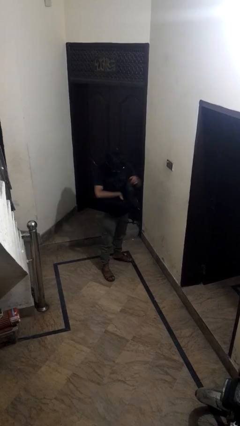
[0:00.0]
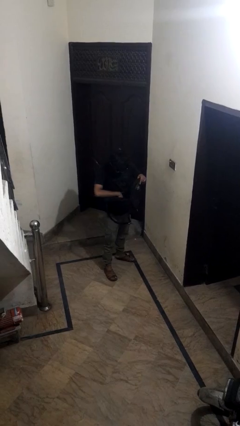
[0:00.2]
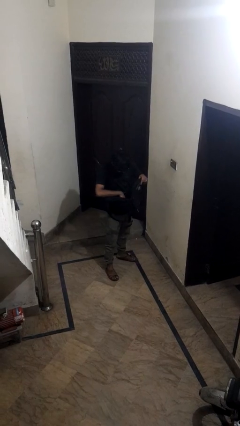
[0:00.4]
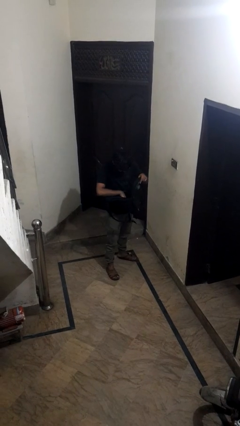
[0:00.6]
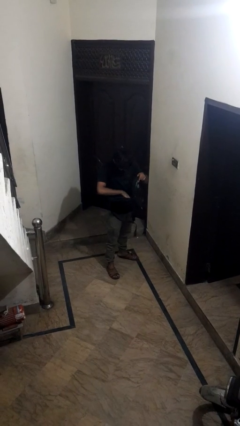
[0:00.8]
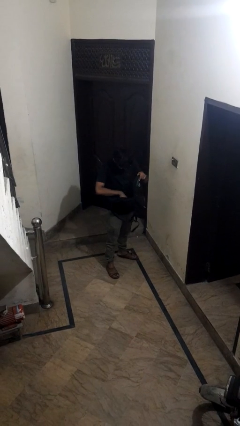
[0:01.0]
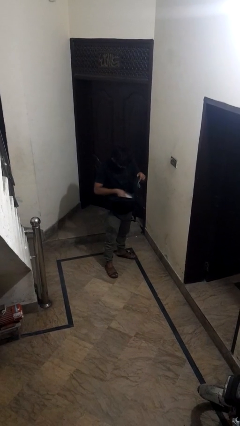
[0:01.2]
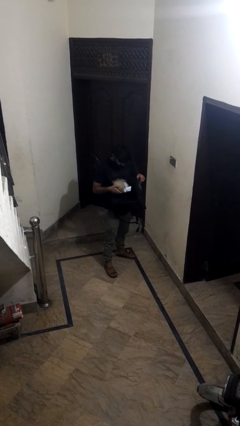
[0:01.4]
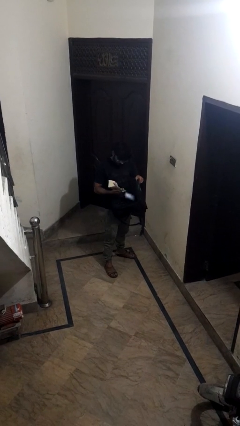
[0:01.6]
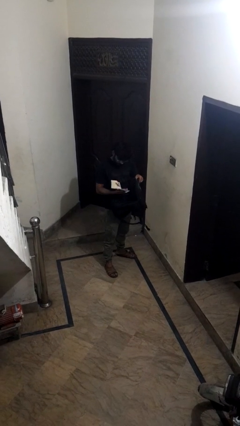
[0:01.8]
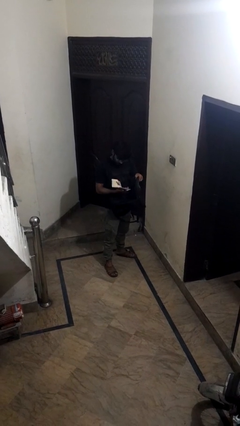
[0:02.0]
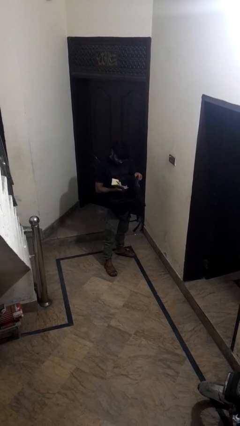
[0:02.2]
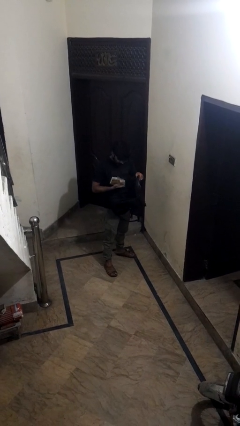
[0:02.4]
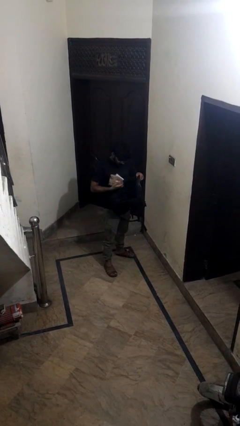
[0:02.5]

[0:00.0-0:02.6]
person takes object from backpack

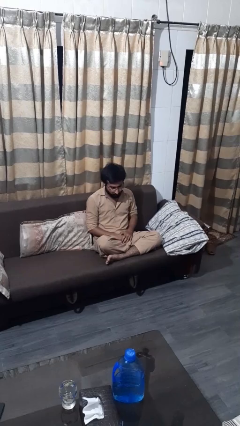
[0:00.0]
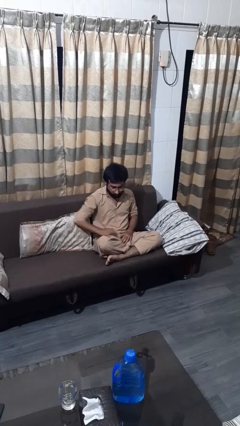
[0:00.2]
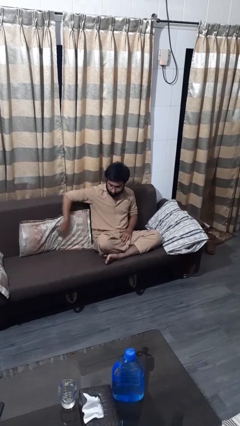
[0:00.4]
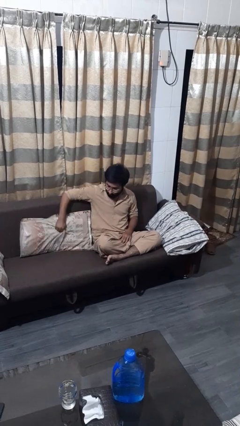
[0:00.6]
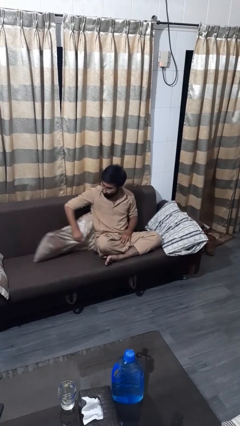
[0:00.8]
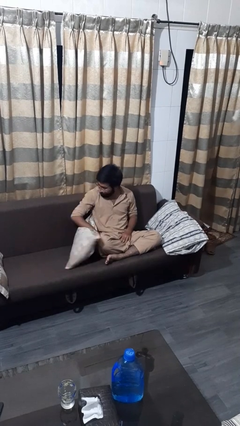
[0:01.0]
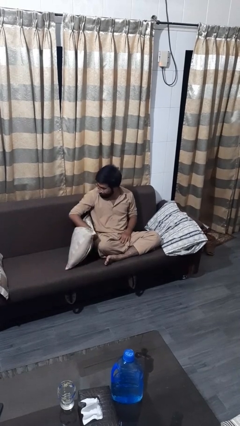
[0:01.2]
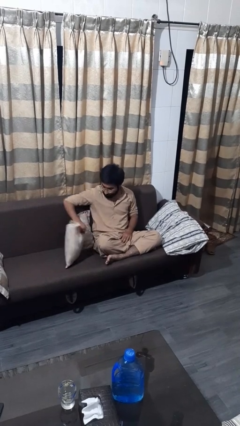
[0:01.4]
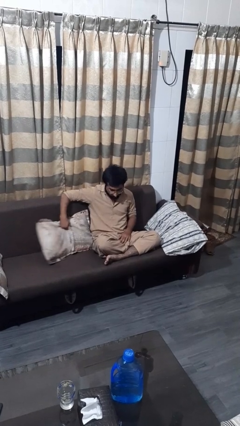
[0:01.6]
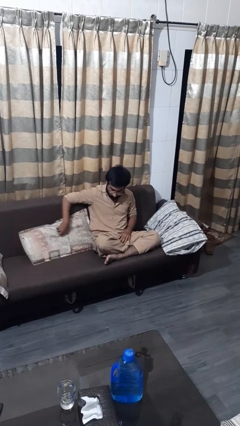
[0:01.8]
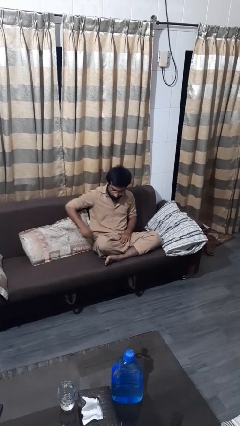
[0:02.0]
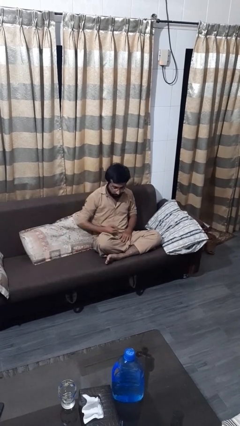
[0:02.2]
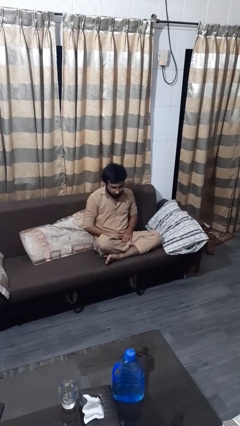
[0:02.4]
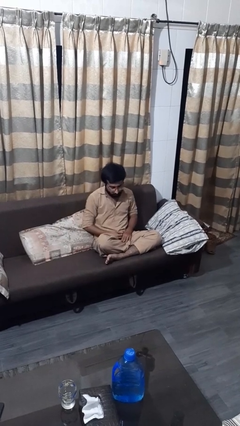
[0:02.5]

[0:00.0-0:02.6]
person searches in couch

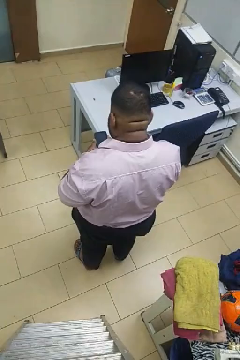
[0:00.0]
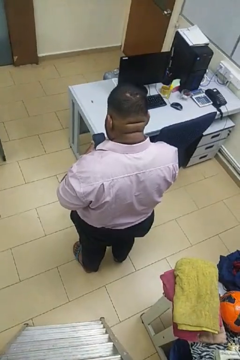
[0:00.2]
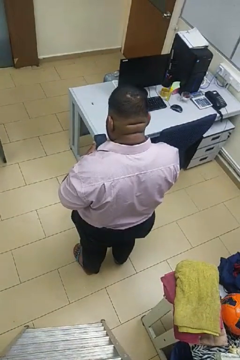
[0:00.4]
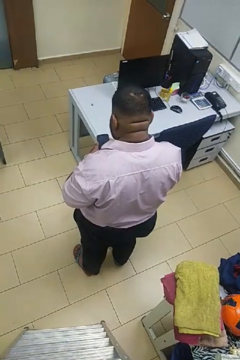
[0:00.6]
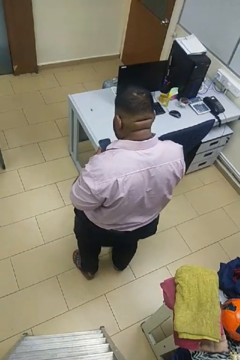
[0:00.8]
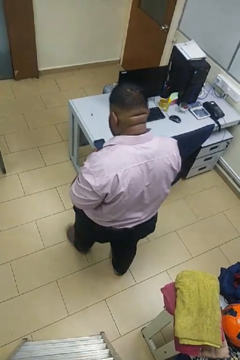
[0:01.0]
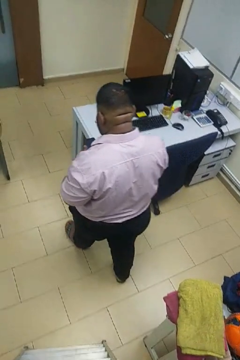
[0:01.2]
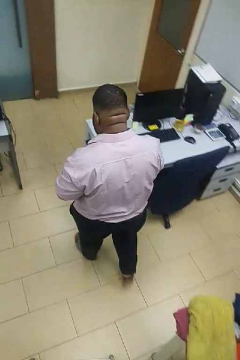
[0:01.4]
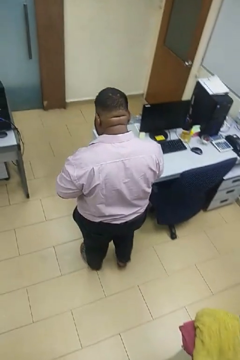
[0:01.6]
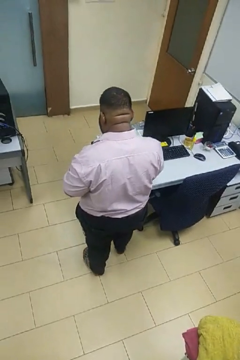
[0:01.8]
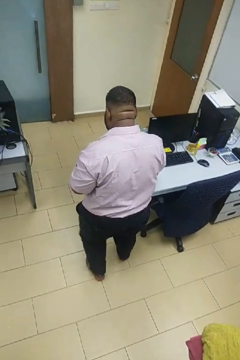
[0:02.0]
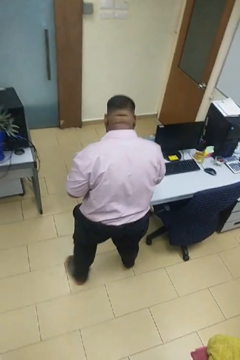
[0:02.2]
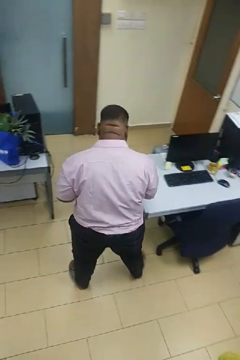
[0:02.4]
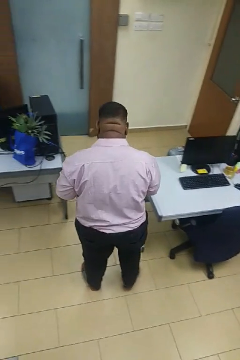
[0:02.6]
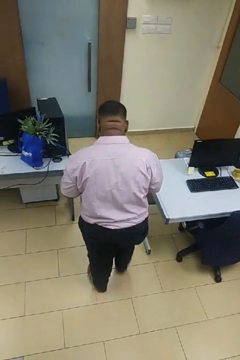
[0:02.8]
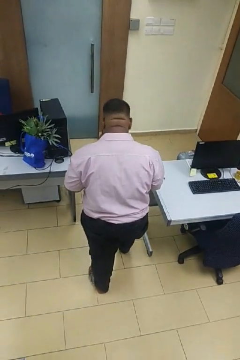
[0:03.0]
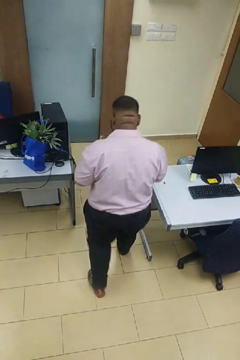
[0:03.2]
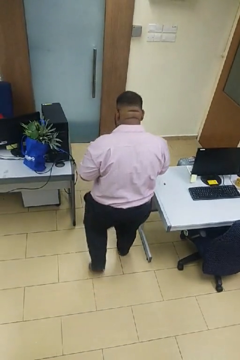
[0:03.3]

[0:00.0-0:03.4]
person bumps into table

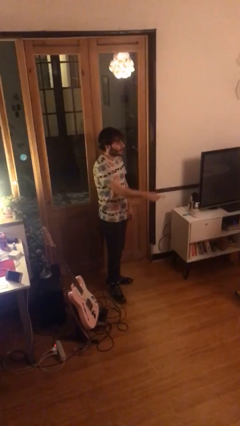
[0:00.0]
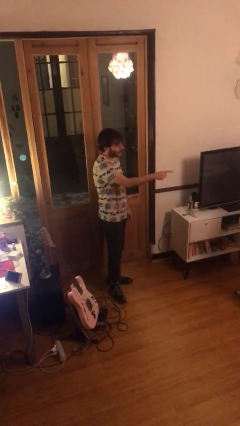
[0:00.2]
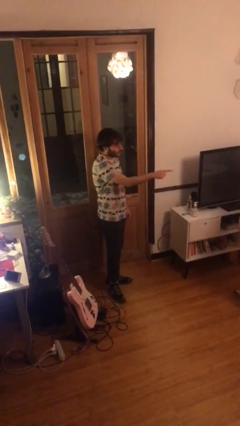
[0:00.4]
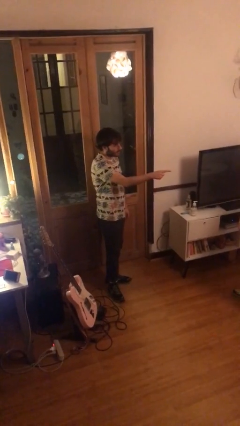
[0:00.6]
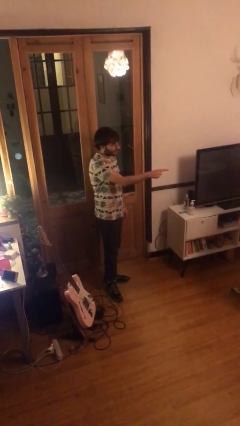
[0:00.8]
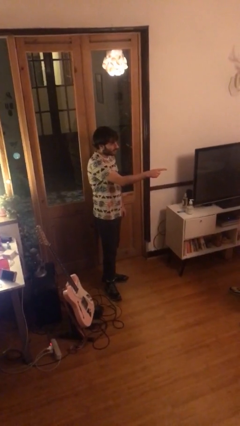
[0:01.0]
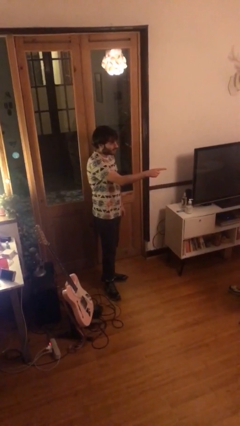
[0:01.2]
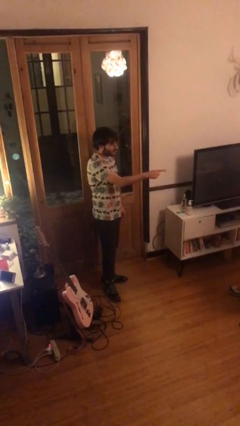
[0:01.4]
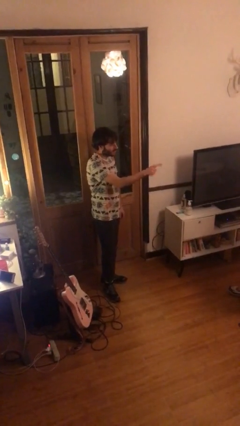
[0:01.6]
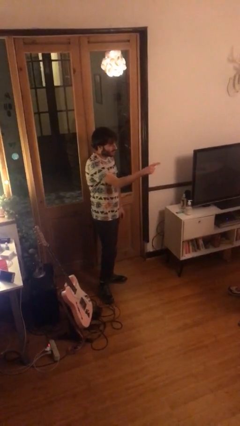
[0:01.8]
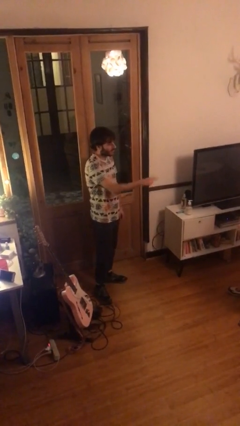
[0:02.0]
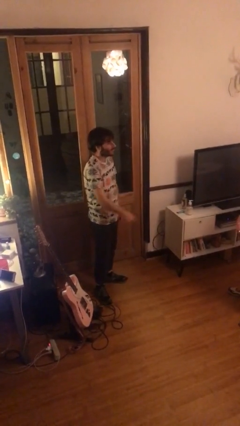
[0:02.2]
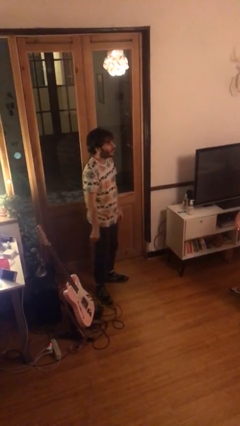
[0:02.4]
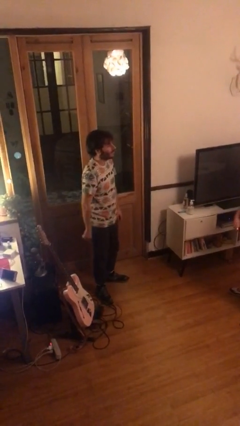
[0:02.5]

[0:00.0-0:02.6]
person points at person

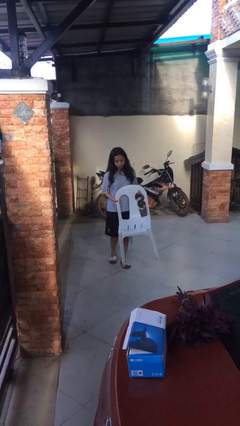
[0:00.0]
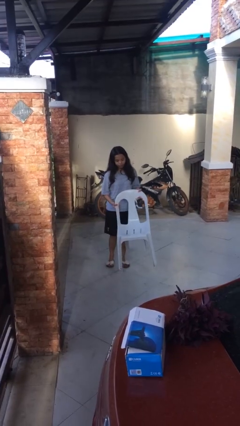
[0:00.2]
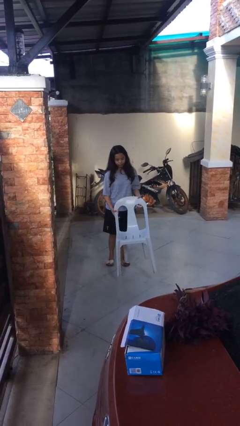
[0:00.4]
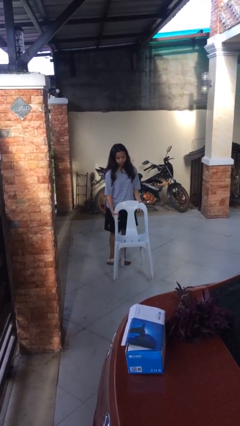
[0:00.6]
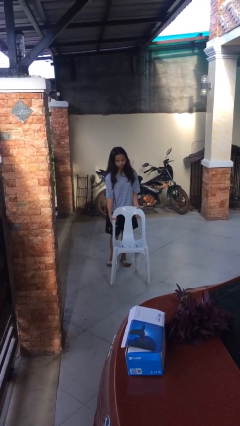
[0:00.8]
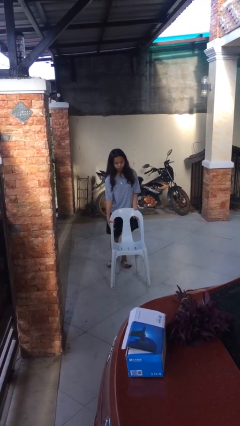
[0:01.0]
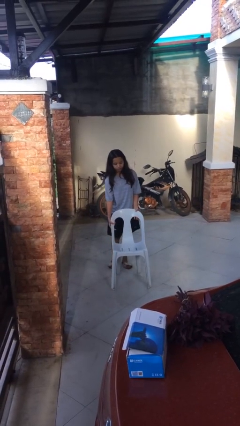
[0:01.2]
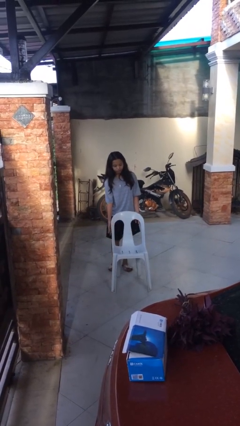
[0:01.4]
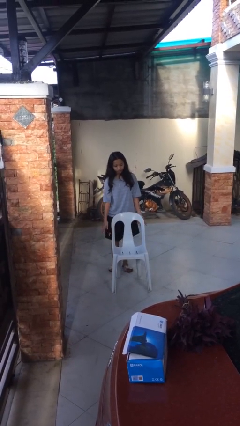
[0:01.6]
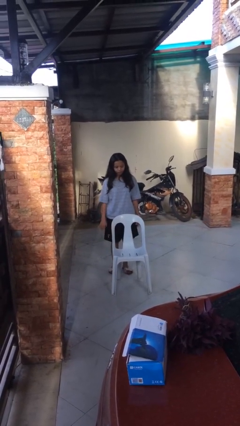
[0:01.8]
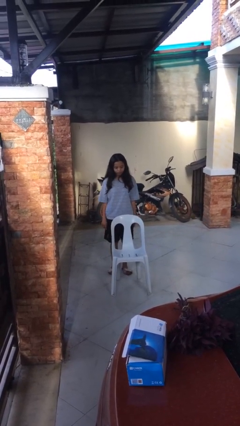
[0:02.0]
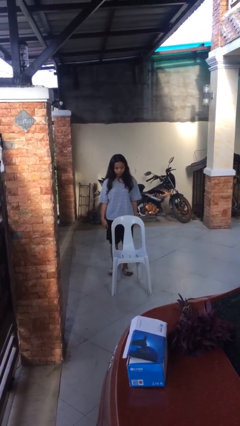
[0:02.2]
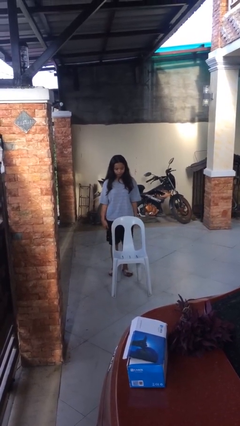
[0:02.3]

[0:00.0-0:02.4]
person puts down object on floor

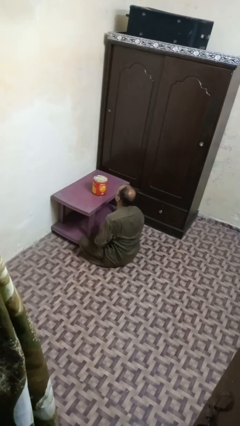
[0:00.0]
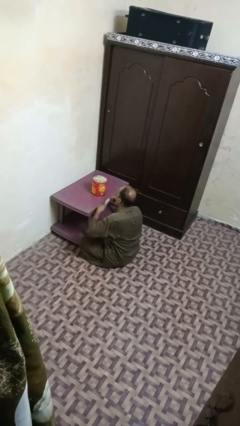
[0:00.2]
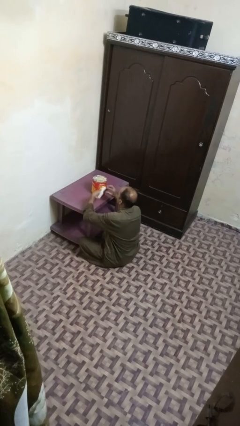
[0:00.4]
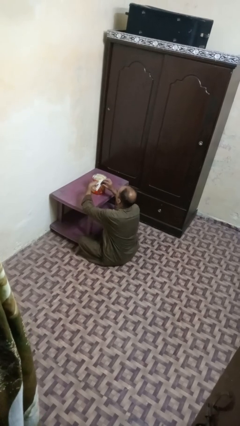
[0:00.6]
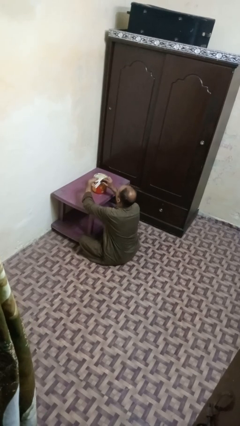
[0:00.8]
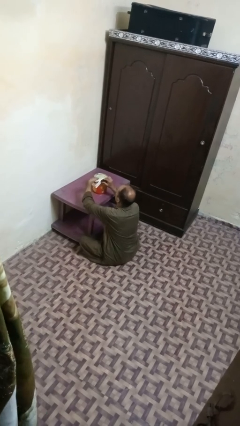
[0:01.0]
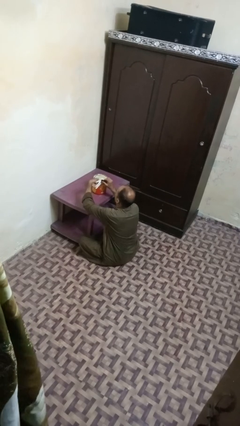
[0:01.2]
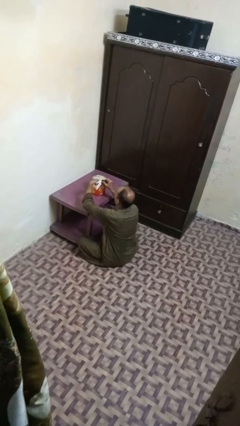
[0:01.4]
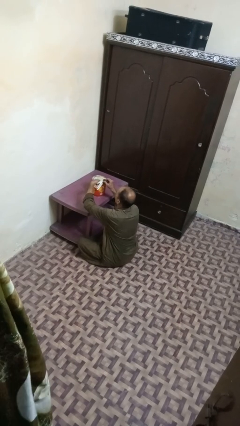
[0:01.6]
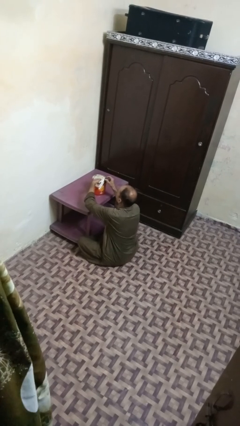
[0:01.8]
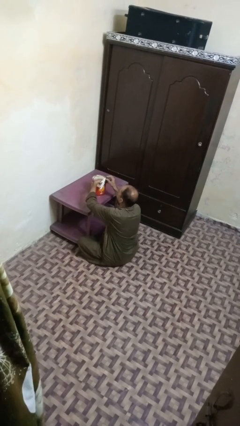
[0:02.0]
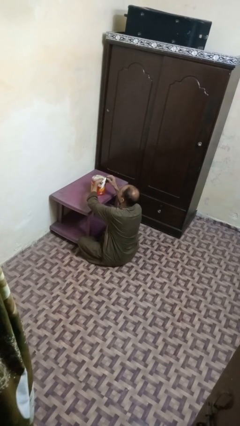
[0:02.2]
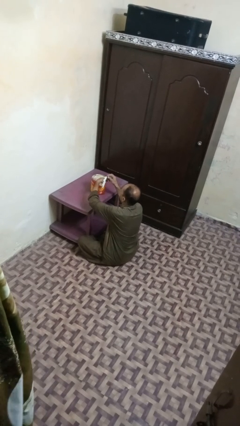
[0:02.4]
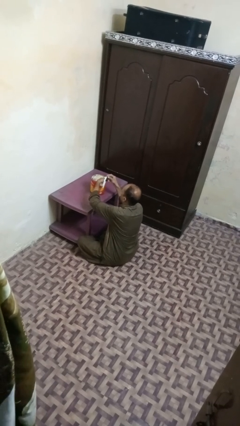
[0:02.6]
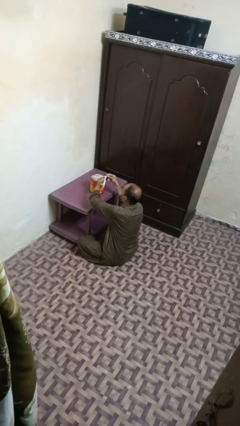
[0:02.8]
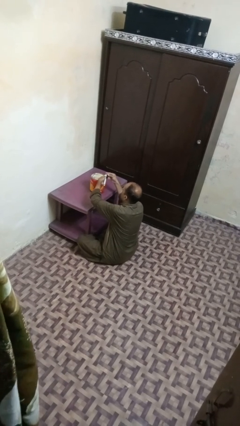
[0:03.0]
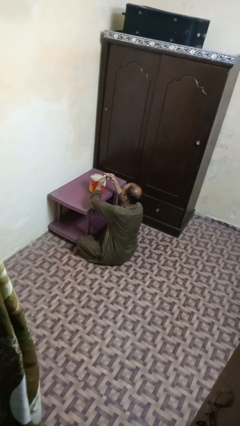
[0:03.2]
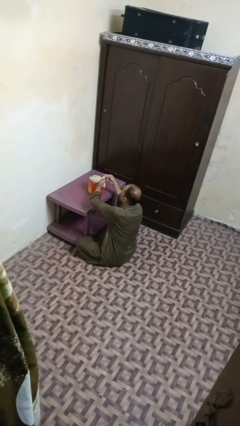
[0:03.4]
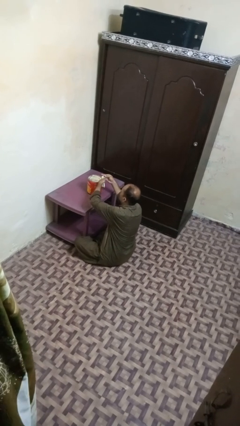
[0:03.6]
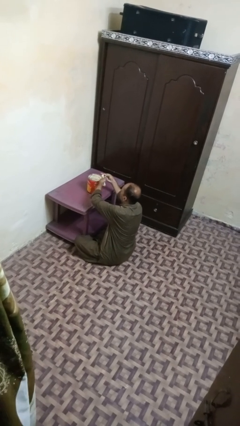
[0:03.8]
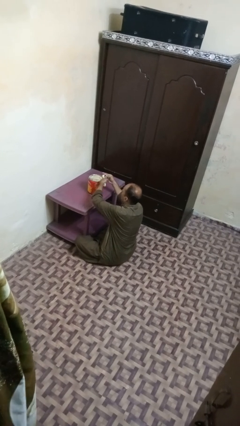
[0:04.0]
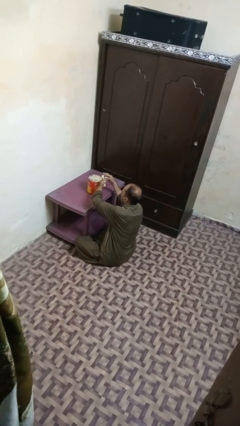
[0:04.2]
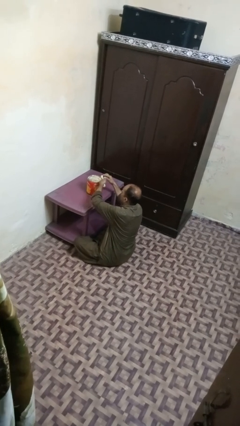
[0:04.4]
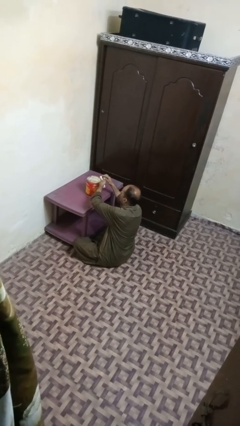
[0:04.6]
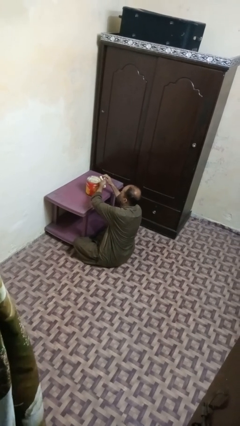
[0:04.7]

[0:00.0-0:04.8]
person opens can with can opener
